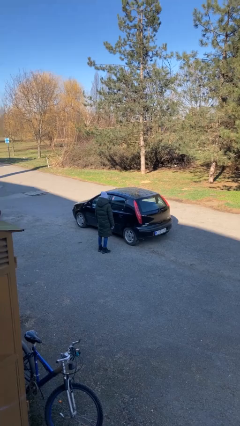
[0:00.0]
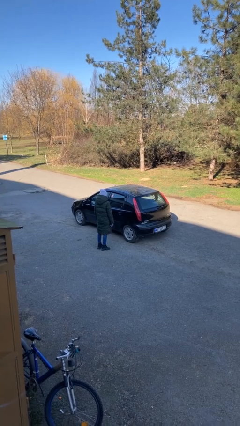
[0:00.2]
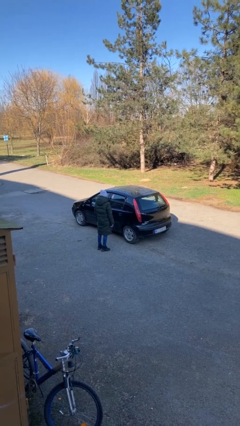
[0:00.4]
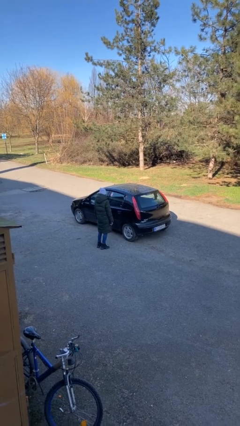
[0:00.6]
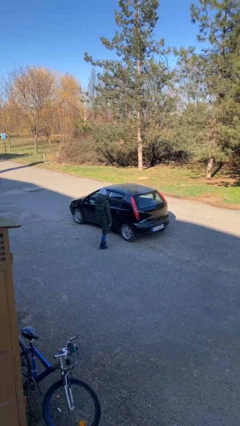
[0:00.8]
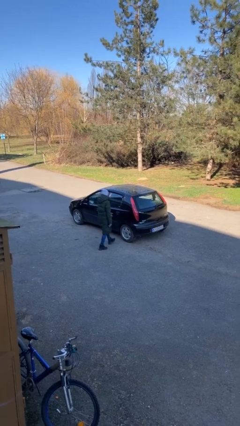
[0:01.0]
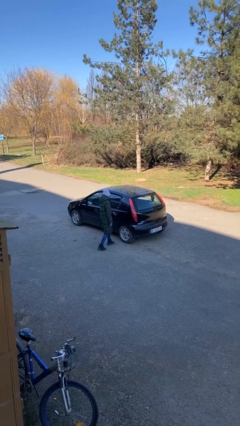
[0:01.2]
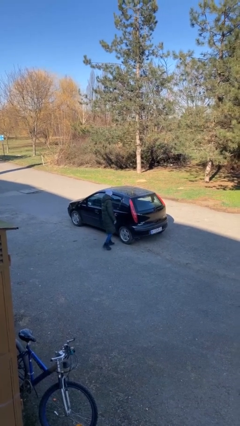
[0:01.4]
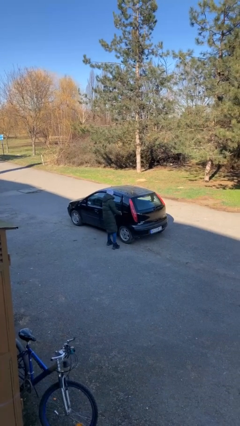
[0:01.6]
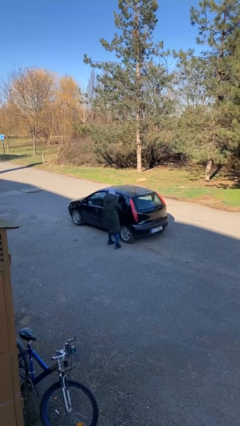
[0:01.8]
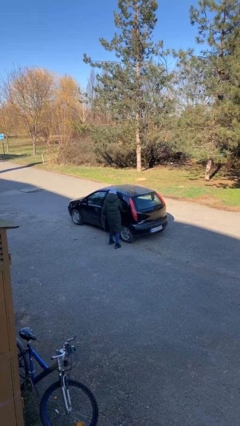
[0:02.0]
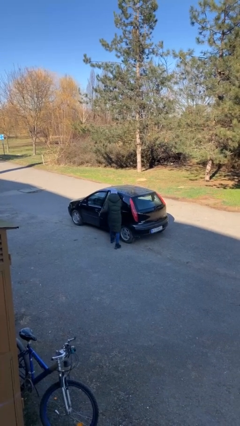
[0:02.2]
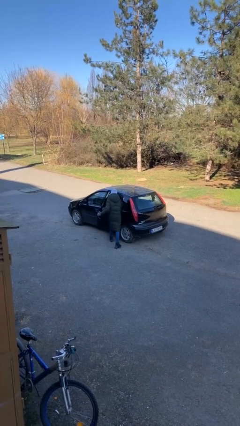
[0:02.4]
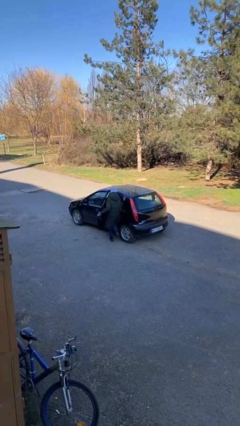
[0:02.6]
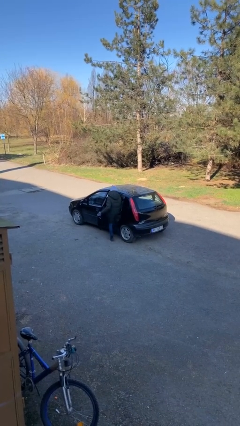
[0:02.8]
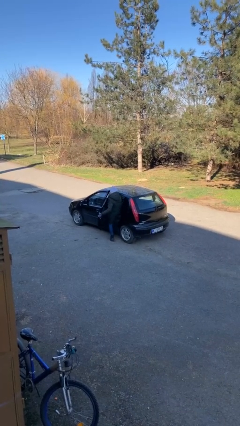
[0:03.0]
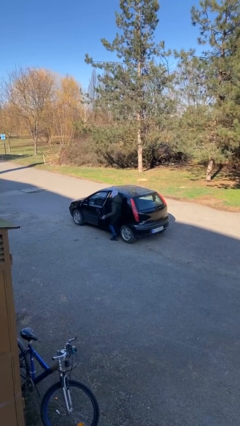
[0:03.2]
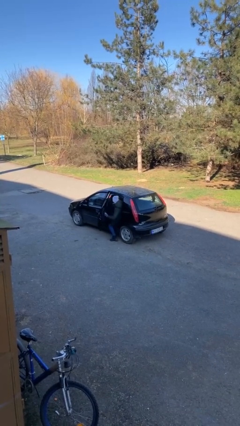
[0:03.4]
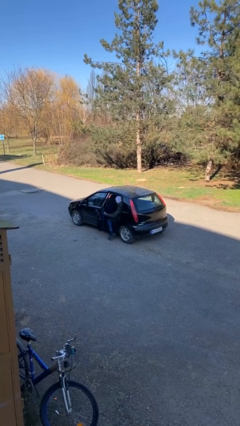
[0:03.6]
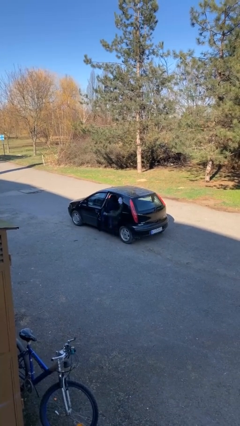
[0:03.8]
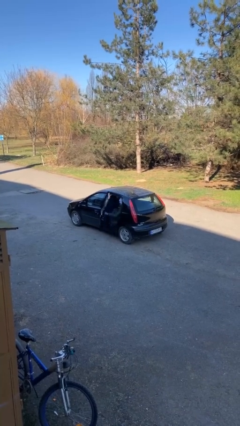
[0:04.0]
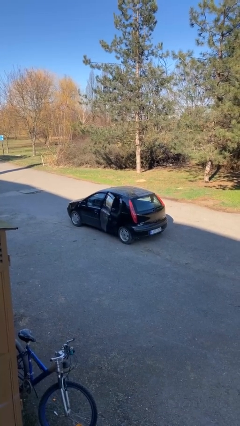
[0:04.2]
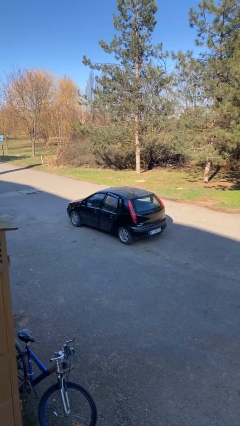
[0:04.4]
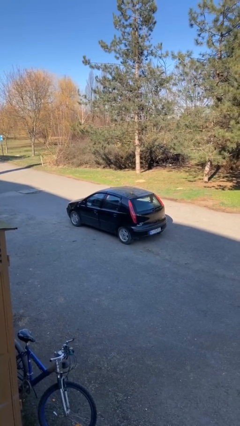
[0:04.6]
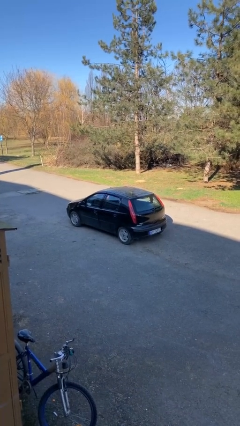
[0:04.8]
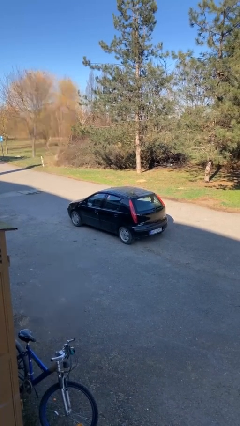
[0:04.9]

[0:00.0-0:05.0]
car picks up person

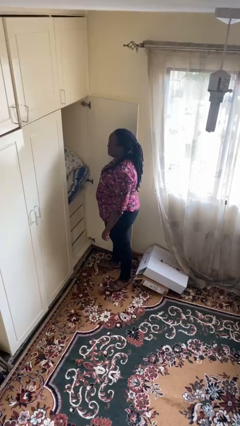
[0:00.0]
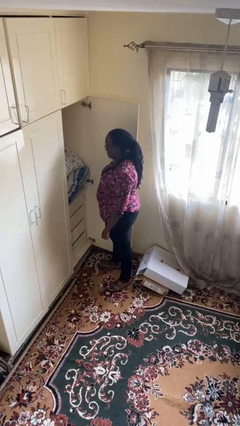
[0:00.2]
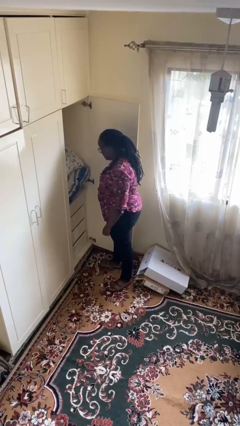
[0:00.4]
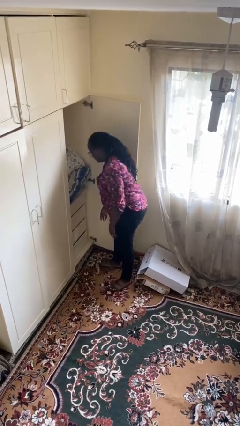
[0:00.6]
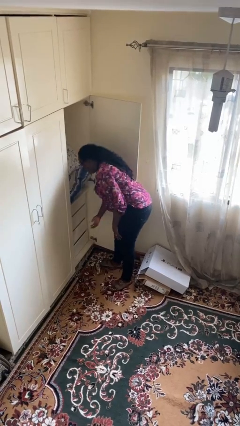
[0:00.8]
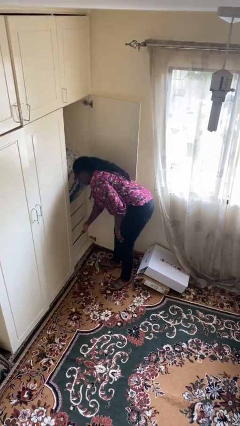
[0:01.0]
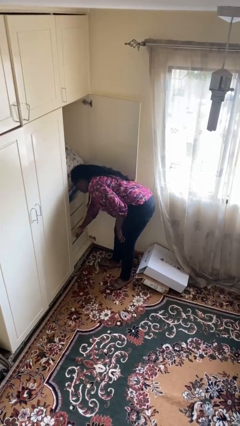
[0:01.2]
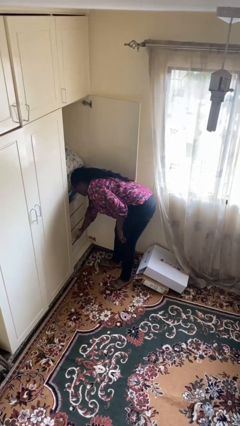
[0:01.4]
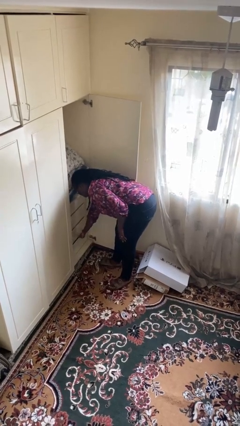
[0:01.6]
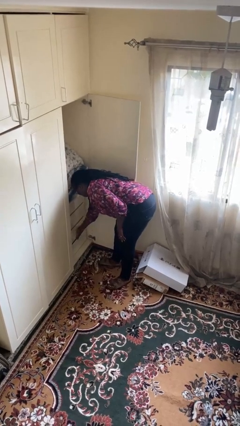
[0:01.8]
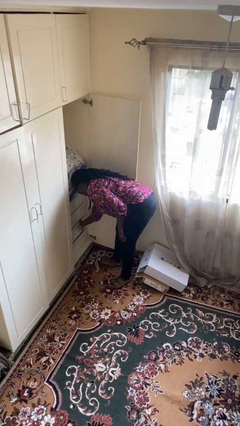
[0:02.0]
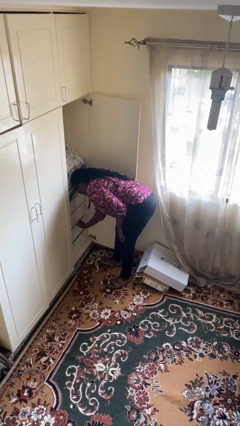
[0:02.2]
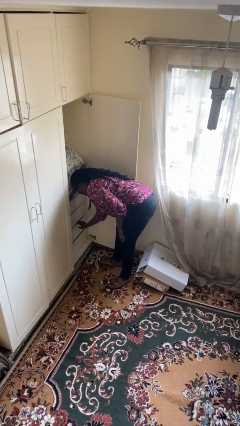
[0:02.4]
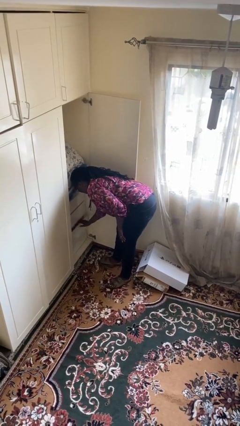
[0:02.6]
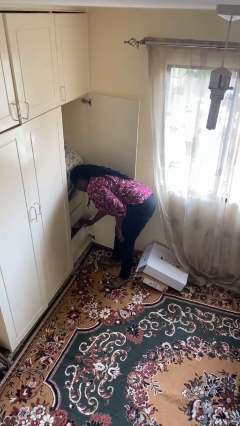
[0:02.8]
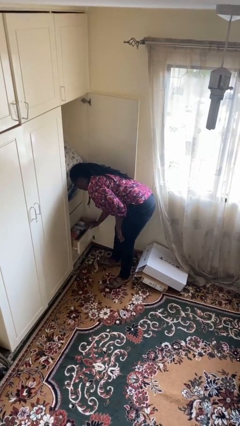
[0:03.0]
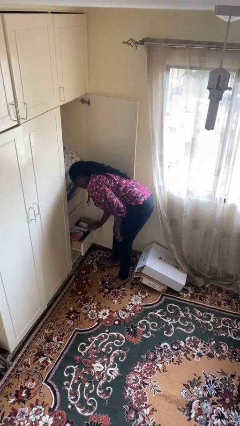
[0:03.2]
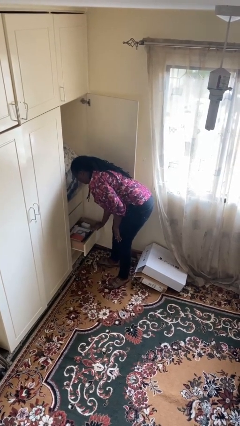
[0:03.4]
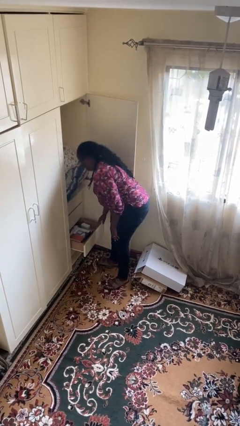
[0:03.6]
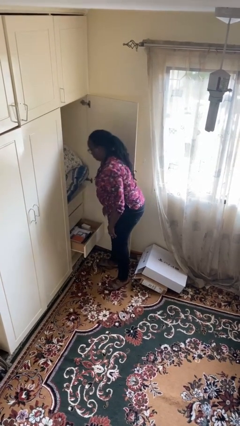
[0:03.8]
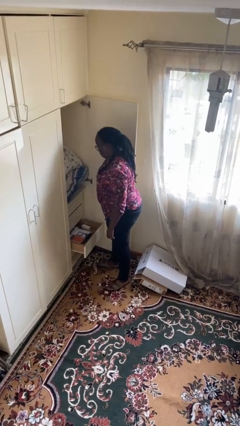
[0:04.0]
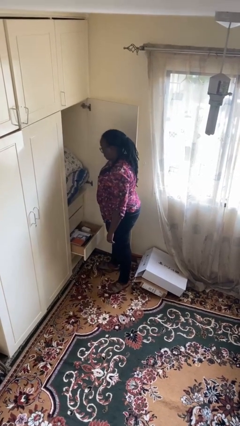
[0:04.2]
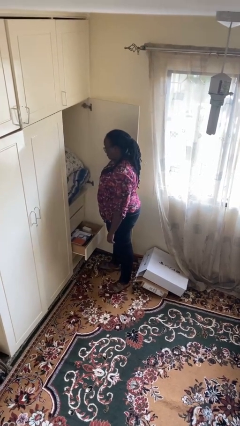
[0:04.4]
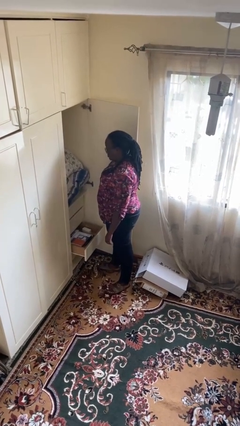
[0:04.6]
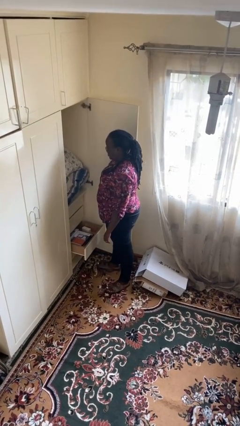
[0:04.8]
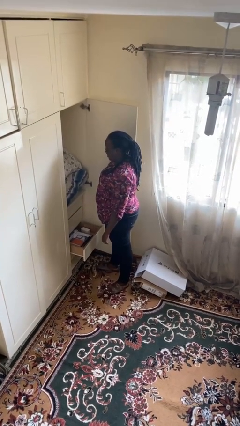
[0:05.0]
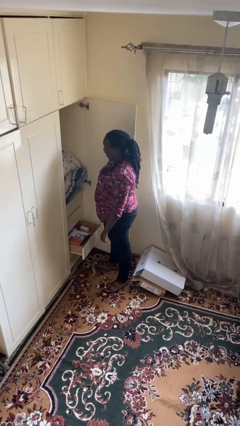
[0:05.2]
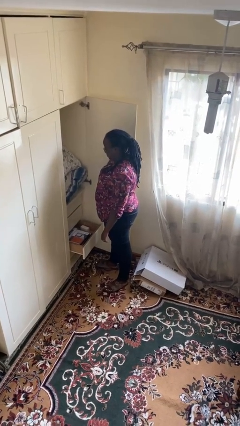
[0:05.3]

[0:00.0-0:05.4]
person opens dresser drawer

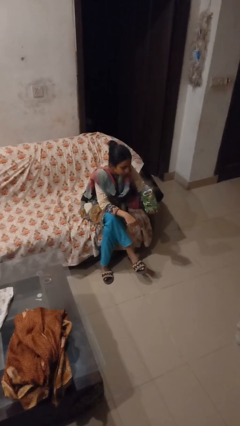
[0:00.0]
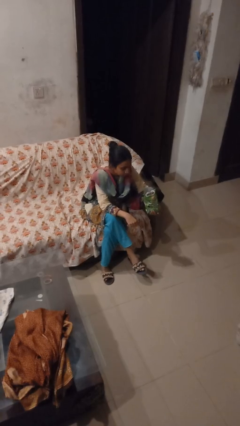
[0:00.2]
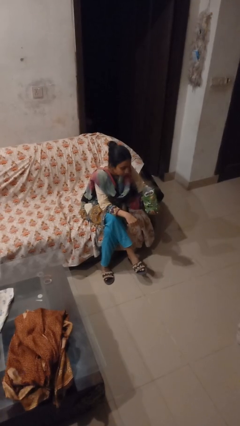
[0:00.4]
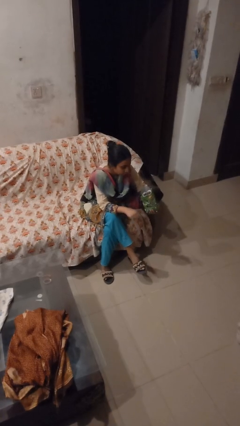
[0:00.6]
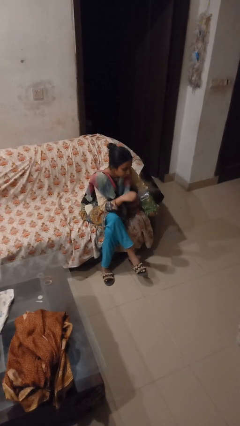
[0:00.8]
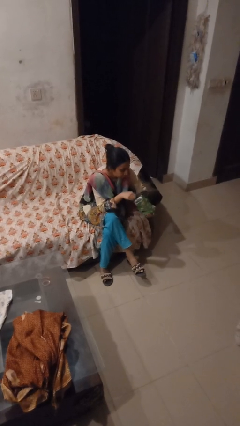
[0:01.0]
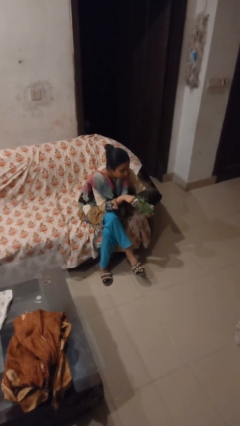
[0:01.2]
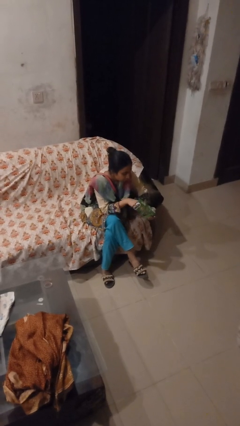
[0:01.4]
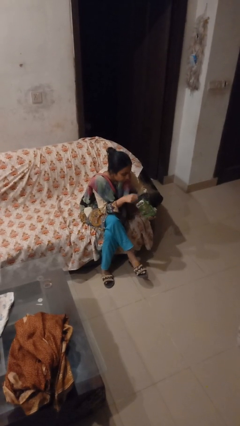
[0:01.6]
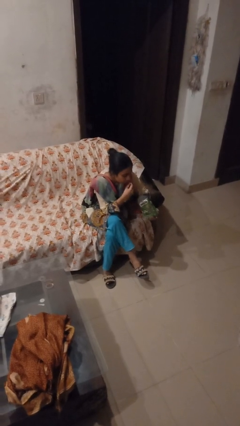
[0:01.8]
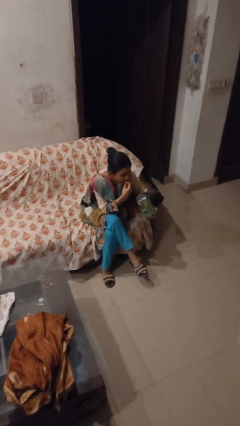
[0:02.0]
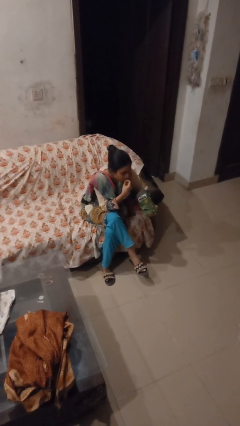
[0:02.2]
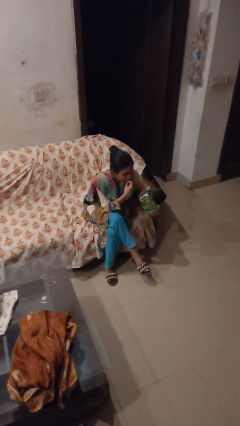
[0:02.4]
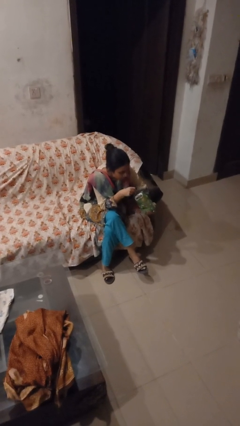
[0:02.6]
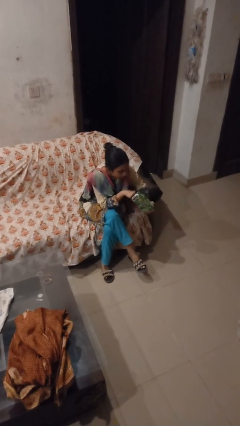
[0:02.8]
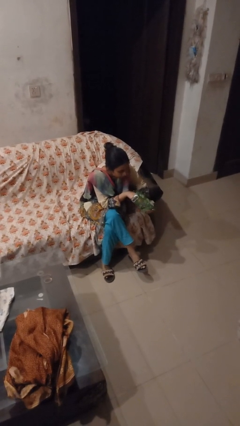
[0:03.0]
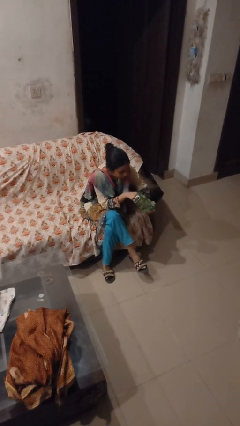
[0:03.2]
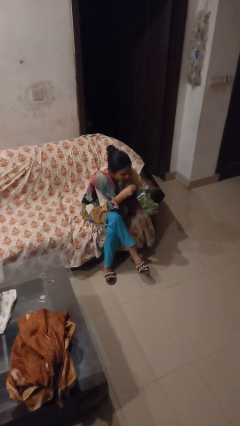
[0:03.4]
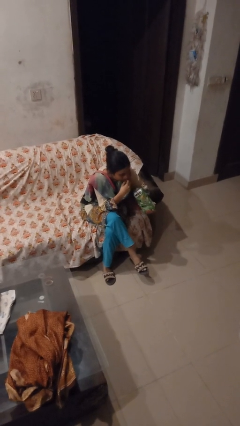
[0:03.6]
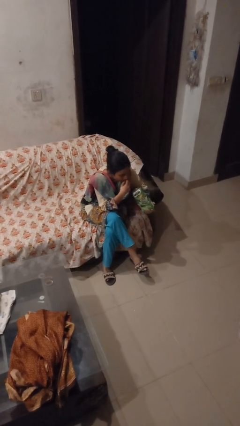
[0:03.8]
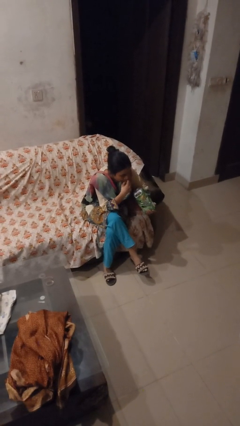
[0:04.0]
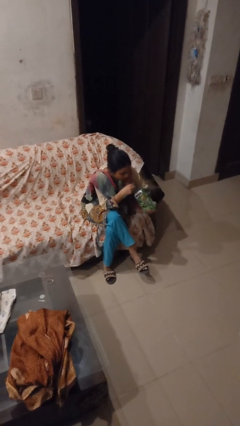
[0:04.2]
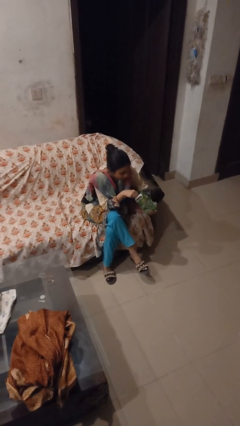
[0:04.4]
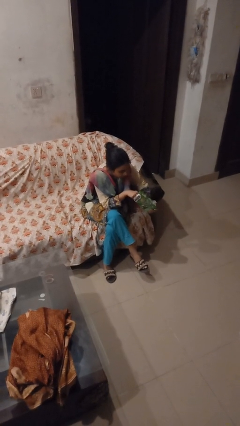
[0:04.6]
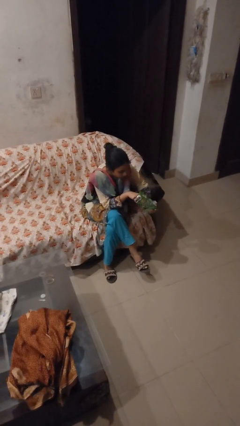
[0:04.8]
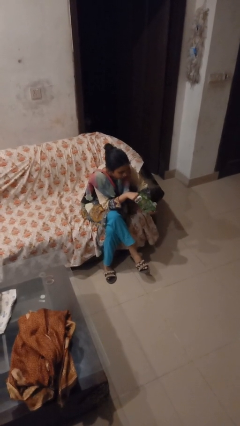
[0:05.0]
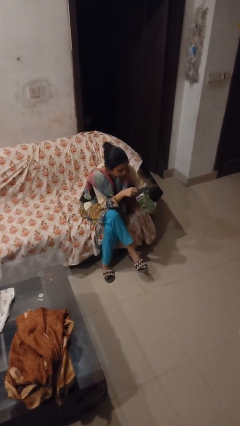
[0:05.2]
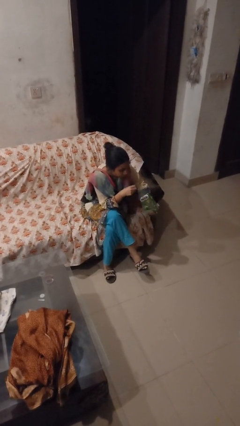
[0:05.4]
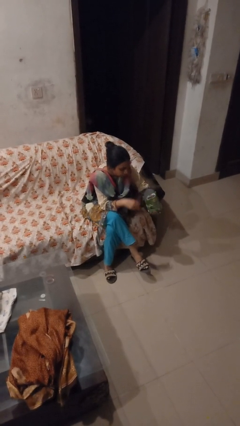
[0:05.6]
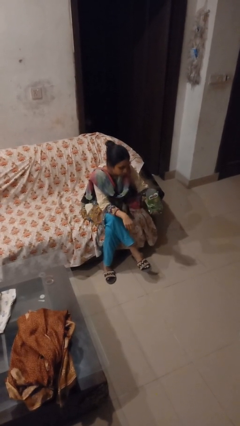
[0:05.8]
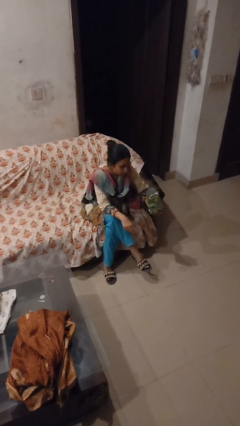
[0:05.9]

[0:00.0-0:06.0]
person eats snack from bag

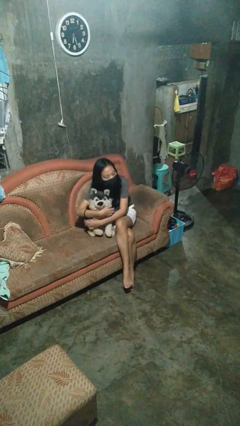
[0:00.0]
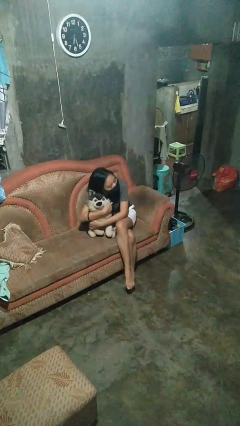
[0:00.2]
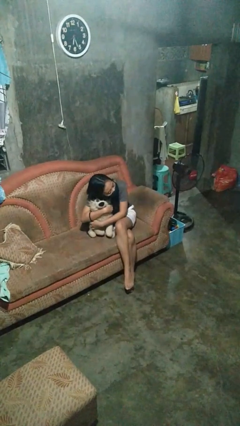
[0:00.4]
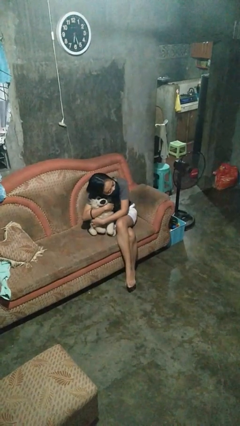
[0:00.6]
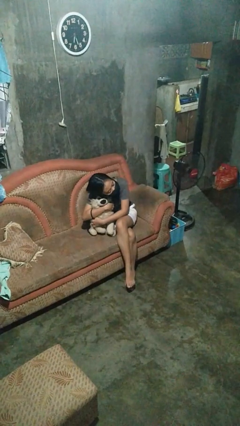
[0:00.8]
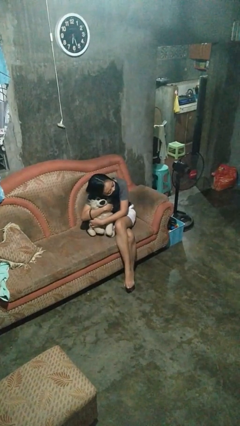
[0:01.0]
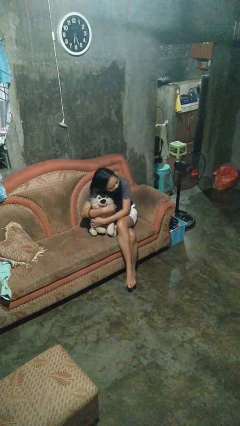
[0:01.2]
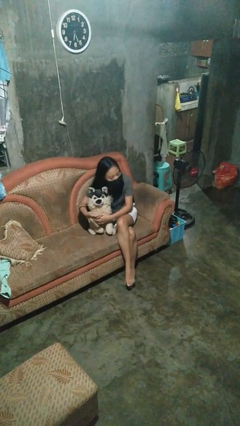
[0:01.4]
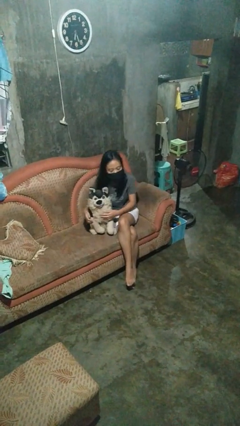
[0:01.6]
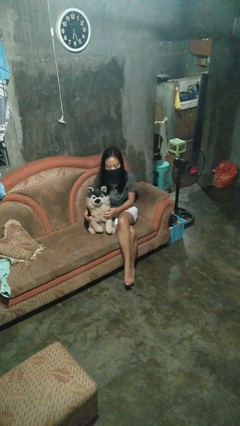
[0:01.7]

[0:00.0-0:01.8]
person hugs stuffed animal
